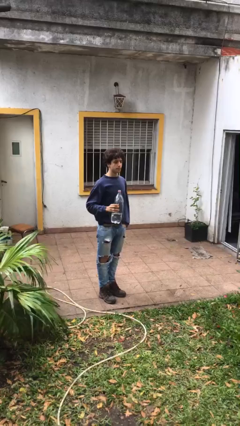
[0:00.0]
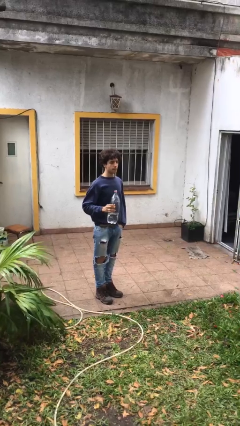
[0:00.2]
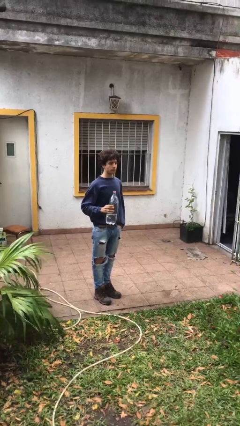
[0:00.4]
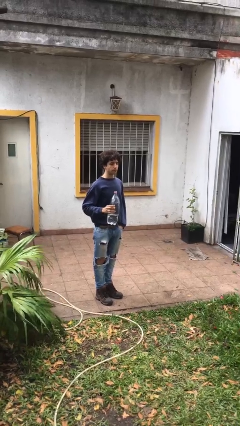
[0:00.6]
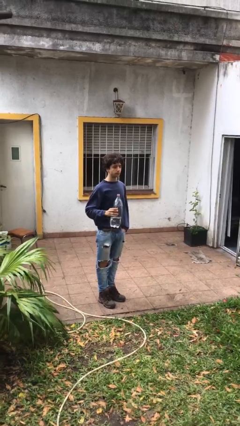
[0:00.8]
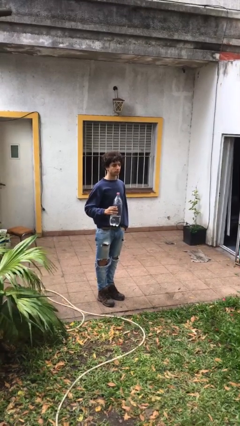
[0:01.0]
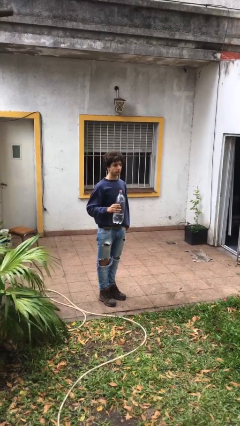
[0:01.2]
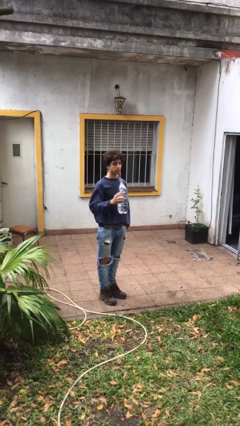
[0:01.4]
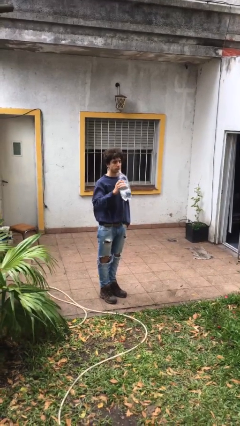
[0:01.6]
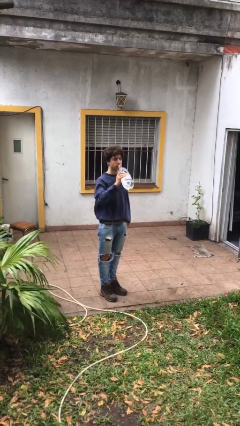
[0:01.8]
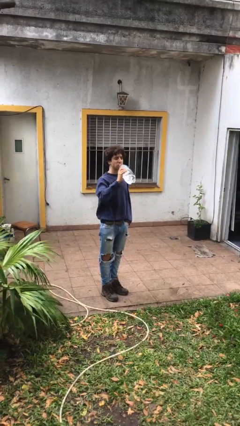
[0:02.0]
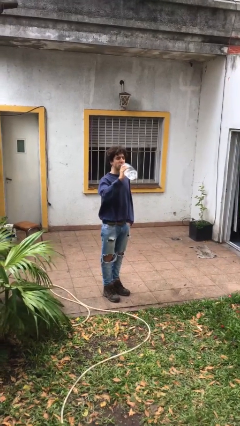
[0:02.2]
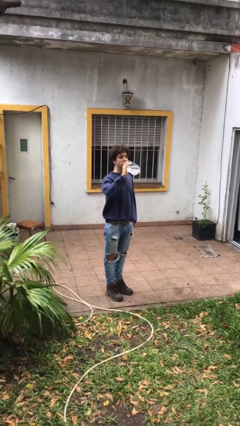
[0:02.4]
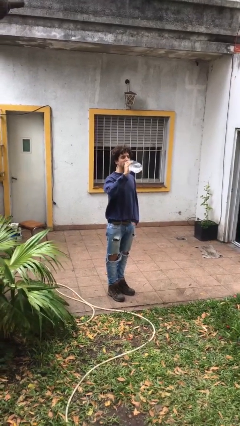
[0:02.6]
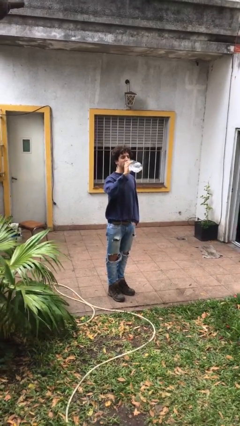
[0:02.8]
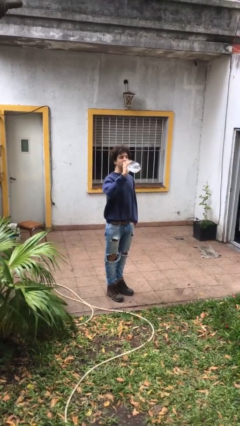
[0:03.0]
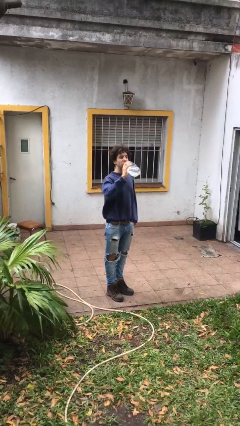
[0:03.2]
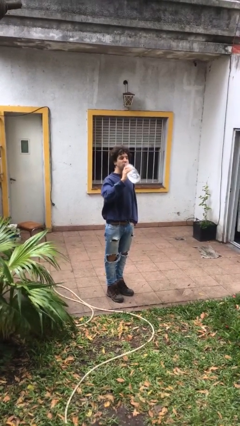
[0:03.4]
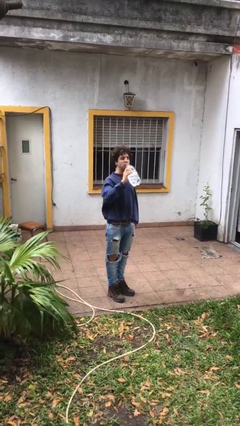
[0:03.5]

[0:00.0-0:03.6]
person drinks from bottle

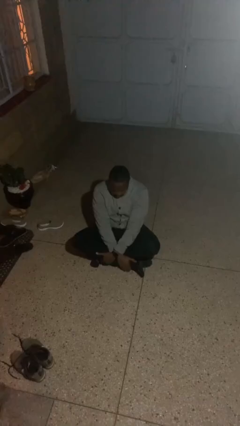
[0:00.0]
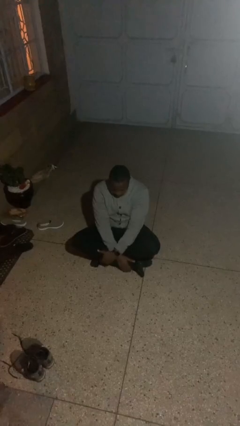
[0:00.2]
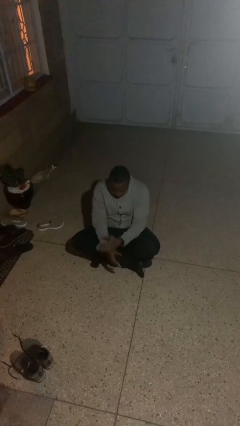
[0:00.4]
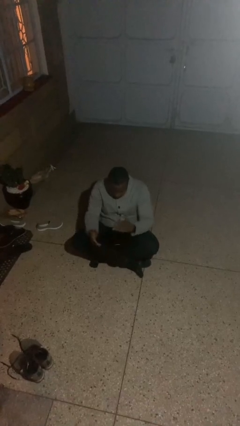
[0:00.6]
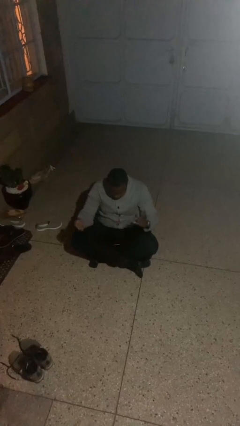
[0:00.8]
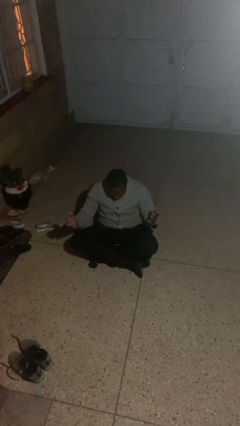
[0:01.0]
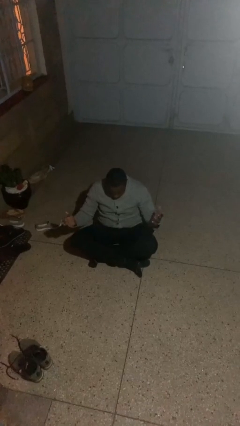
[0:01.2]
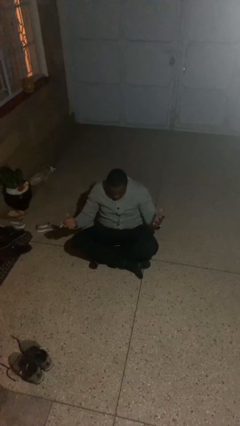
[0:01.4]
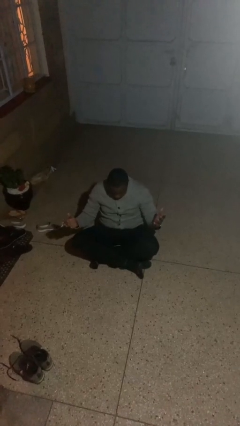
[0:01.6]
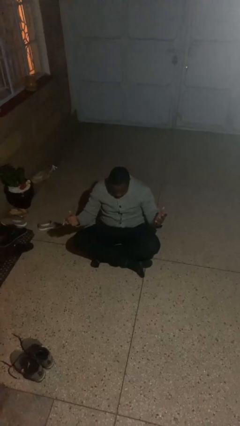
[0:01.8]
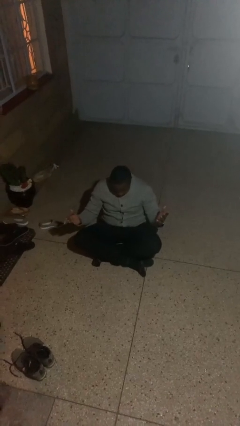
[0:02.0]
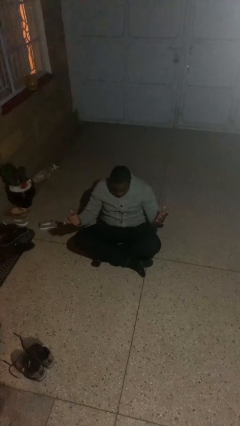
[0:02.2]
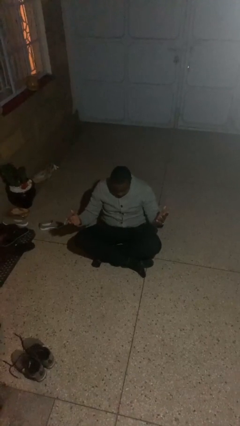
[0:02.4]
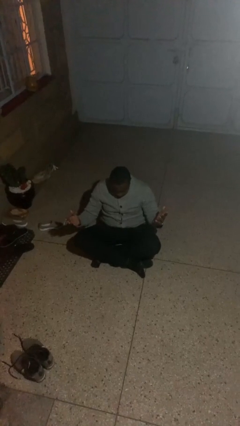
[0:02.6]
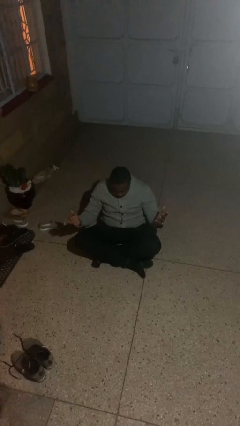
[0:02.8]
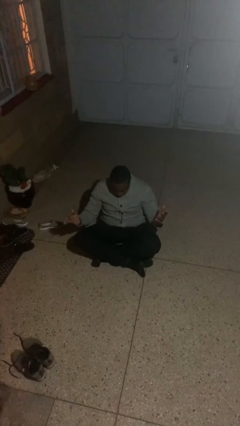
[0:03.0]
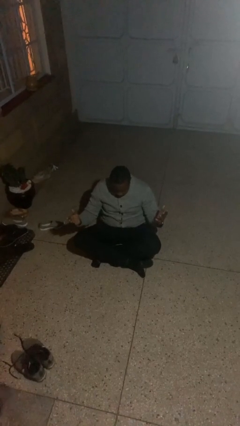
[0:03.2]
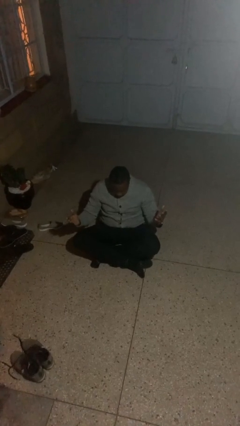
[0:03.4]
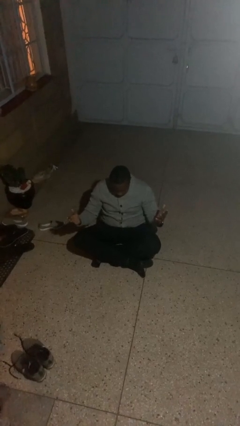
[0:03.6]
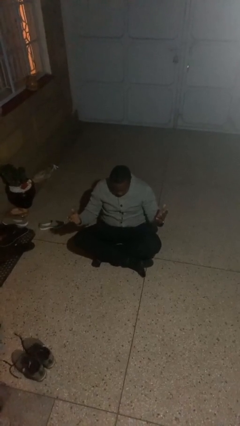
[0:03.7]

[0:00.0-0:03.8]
person prays

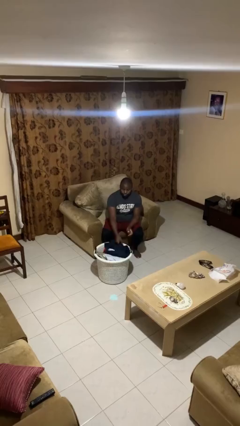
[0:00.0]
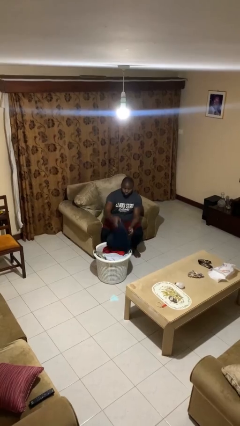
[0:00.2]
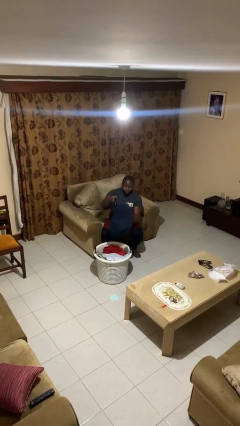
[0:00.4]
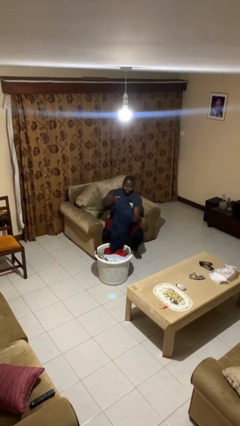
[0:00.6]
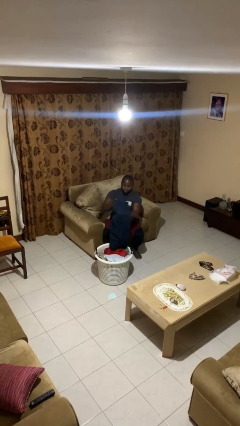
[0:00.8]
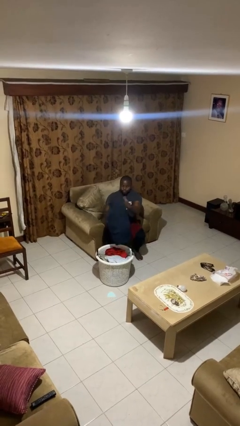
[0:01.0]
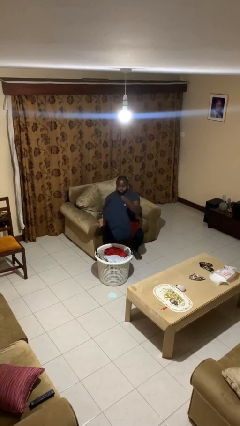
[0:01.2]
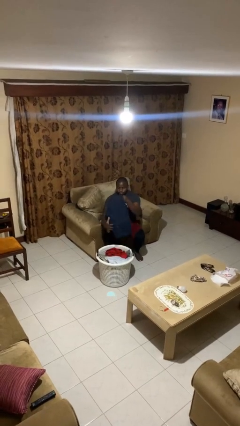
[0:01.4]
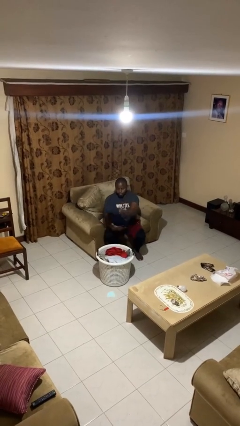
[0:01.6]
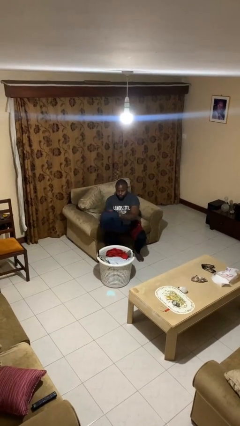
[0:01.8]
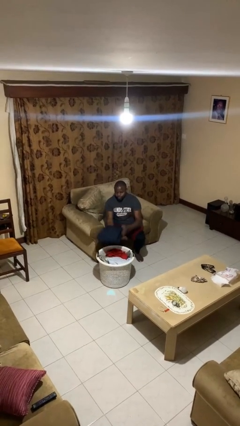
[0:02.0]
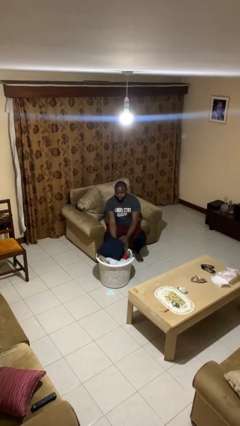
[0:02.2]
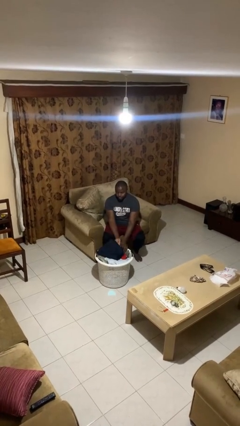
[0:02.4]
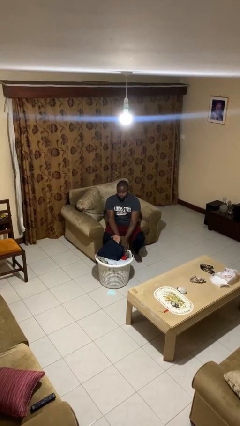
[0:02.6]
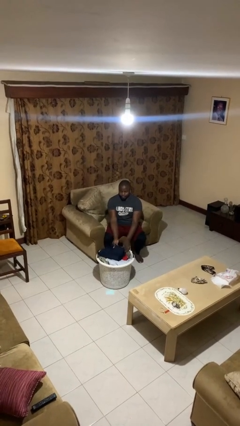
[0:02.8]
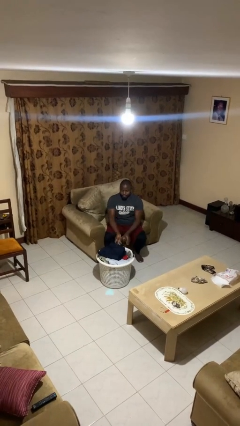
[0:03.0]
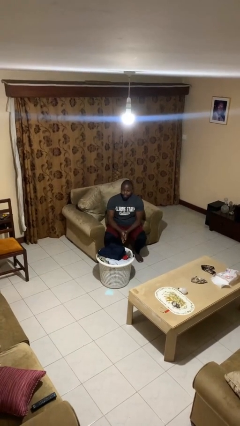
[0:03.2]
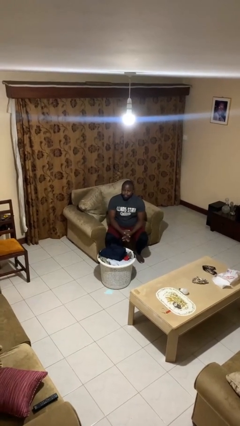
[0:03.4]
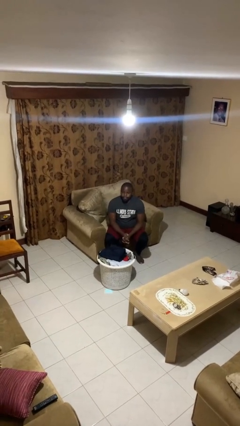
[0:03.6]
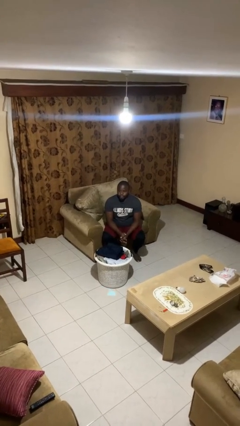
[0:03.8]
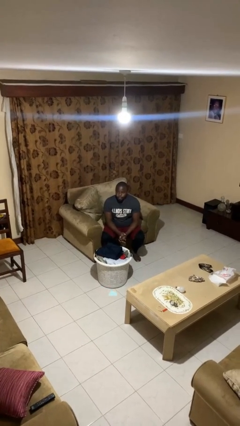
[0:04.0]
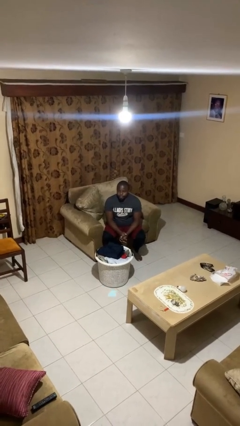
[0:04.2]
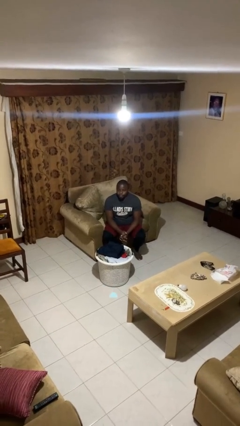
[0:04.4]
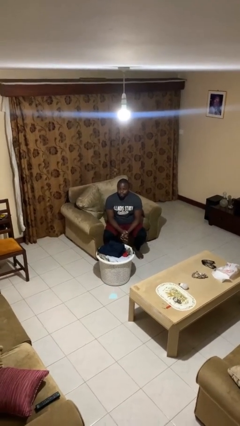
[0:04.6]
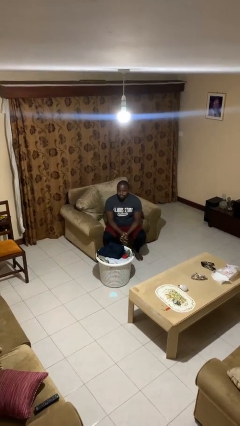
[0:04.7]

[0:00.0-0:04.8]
person folds pants

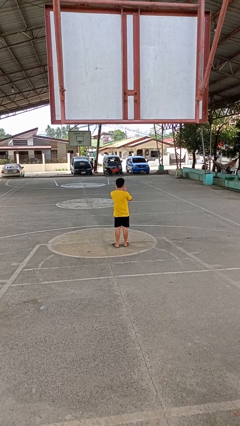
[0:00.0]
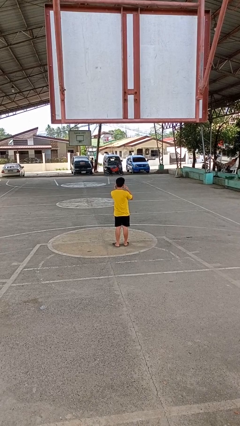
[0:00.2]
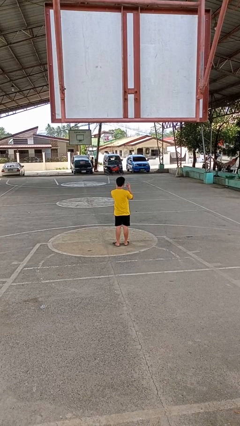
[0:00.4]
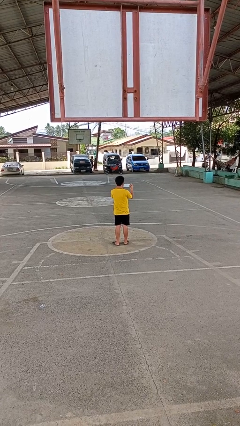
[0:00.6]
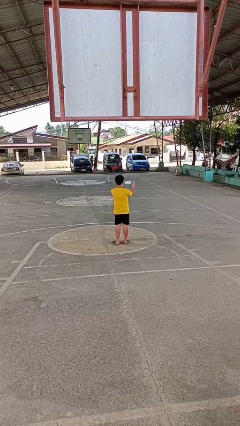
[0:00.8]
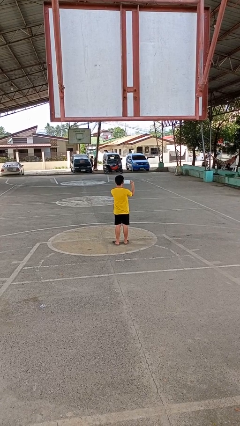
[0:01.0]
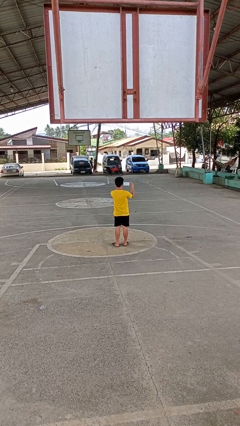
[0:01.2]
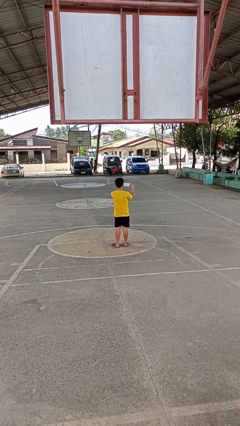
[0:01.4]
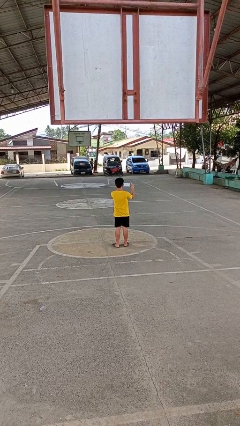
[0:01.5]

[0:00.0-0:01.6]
person takes off facemask

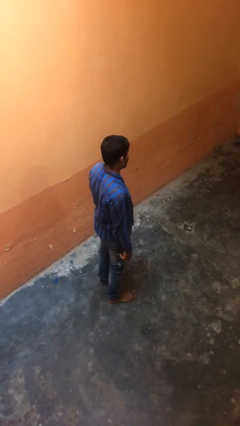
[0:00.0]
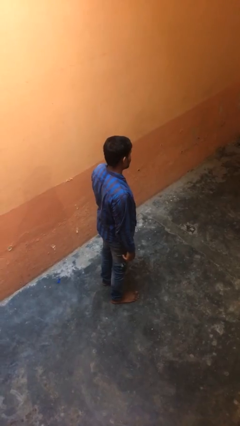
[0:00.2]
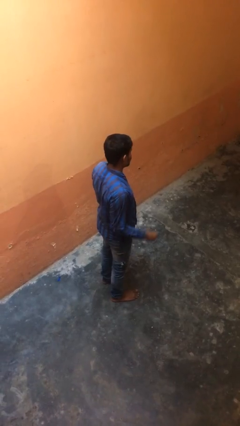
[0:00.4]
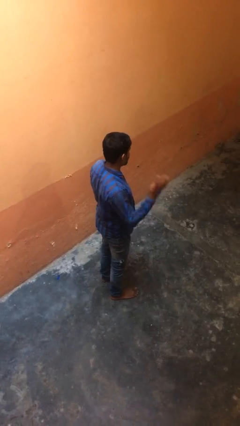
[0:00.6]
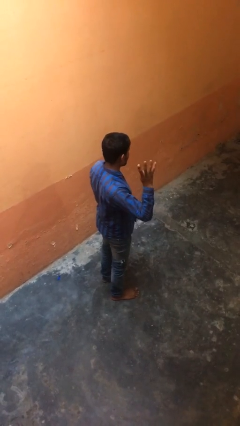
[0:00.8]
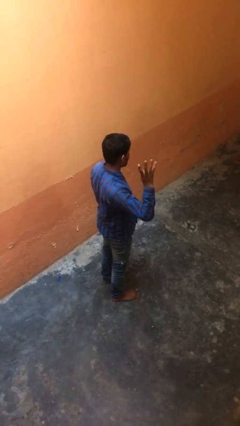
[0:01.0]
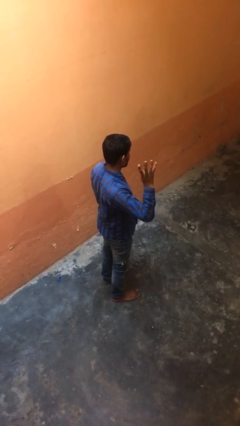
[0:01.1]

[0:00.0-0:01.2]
person gestures number four

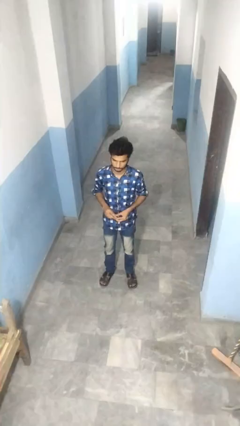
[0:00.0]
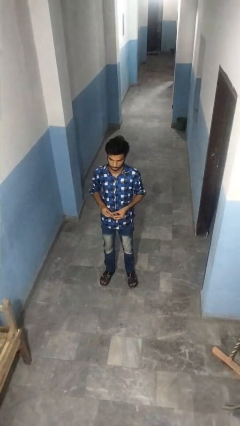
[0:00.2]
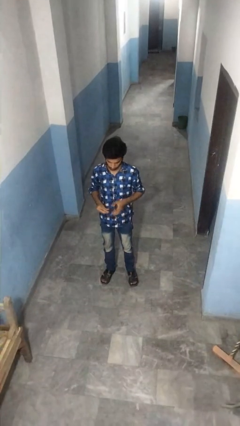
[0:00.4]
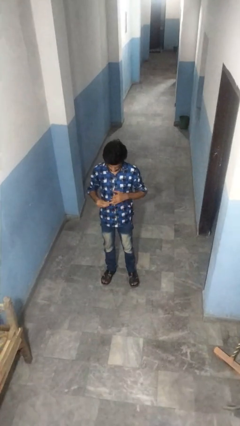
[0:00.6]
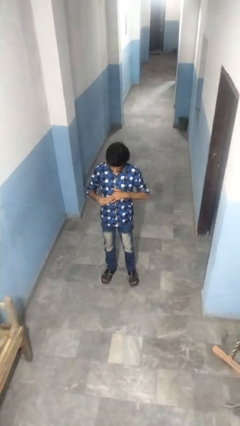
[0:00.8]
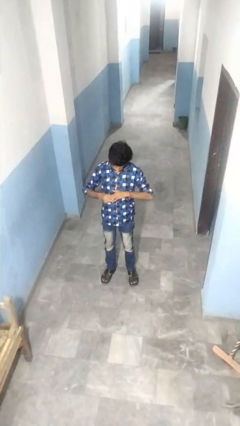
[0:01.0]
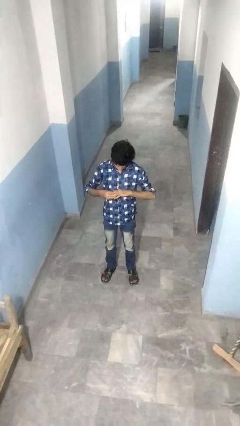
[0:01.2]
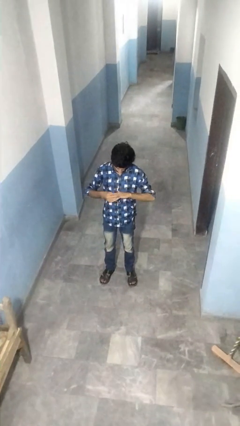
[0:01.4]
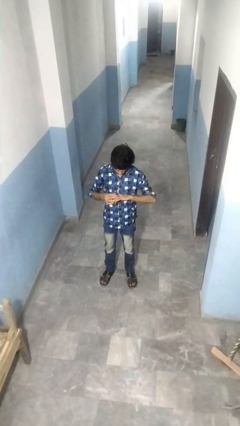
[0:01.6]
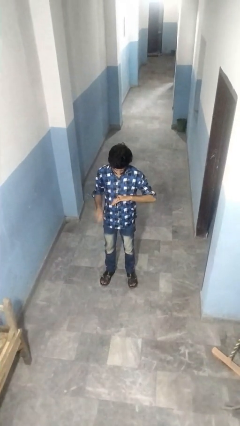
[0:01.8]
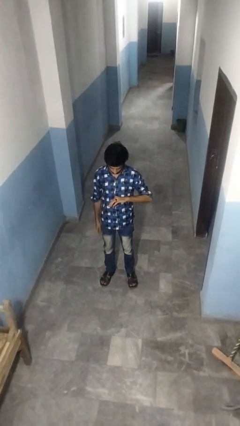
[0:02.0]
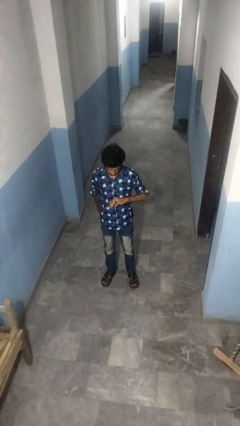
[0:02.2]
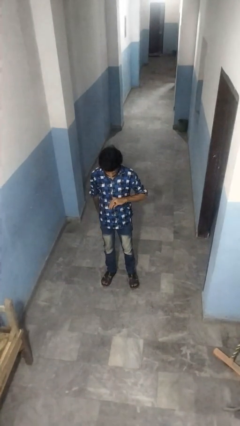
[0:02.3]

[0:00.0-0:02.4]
person puts on ring

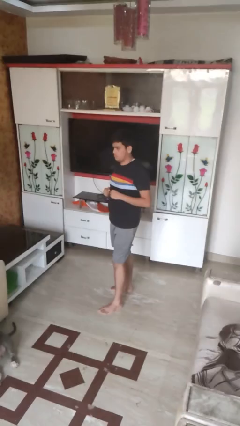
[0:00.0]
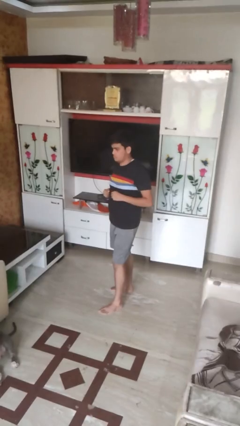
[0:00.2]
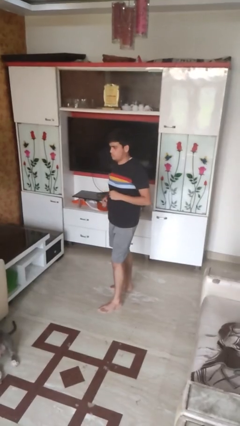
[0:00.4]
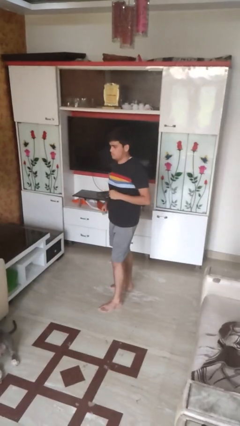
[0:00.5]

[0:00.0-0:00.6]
person punches
